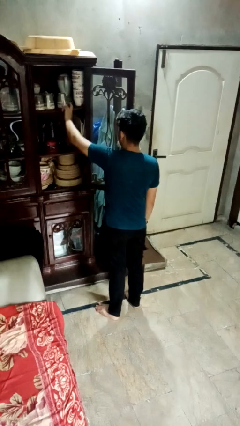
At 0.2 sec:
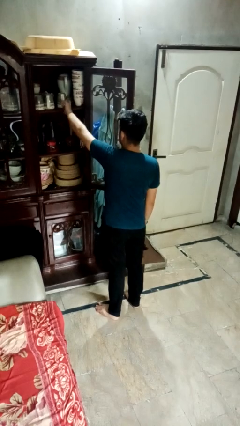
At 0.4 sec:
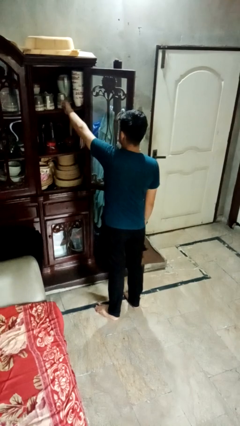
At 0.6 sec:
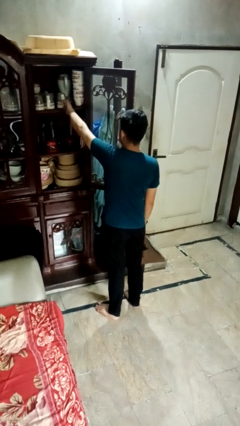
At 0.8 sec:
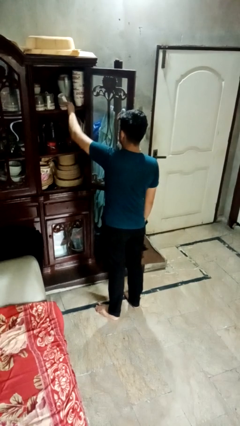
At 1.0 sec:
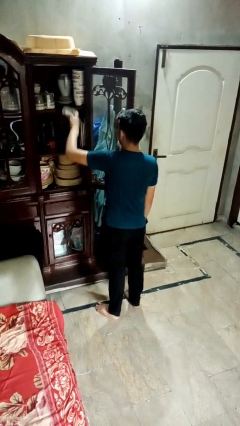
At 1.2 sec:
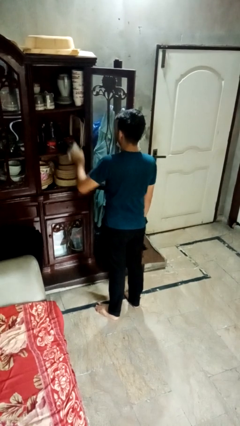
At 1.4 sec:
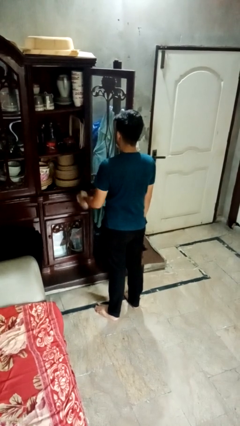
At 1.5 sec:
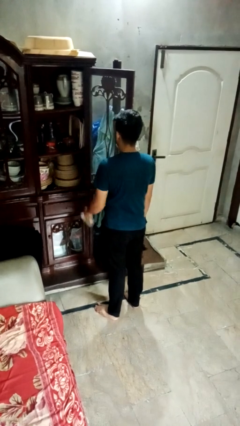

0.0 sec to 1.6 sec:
person takes object from cabinet

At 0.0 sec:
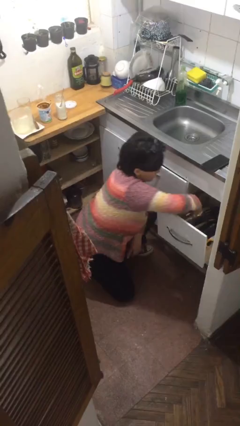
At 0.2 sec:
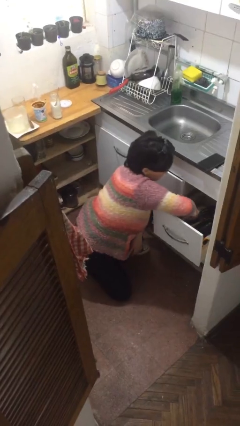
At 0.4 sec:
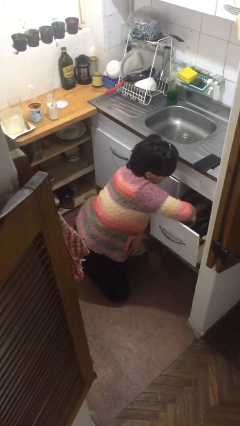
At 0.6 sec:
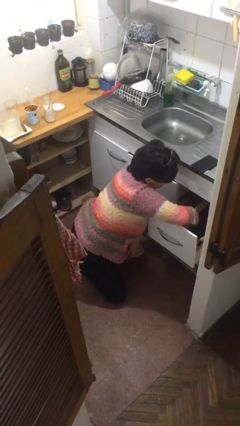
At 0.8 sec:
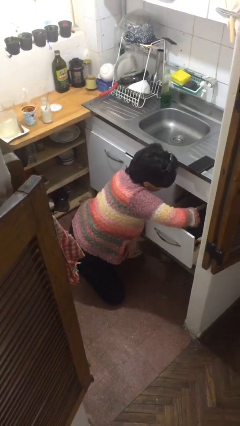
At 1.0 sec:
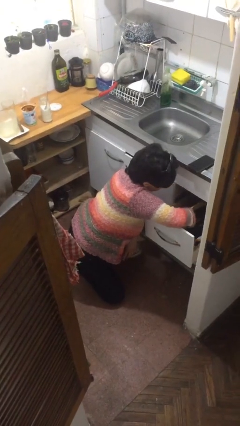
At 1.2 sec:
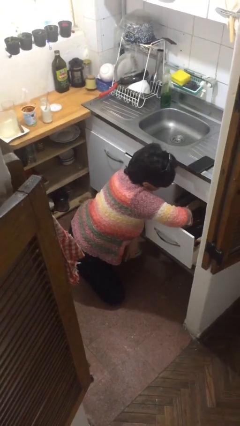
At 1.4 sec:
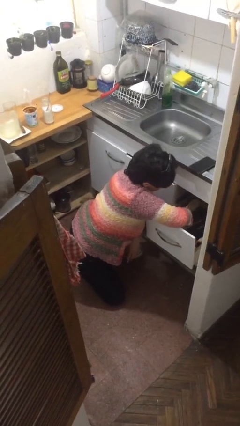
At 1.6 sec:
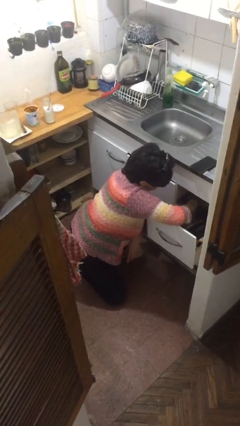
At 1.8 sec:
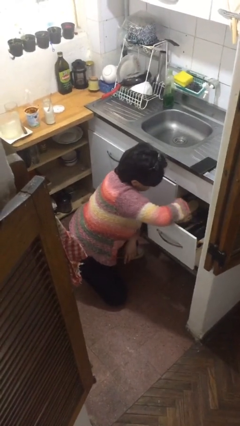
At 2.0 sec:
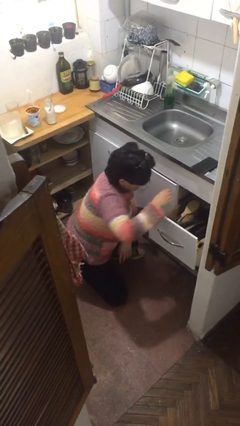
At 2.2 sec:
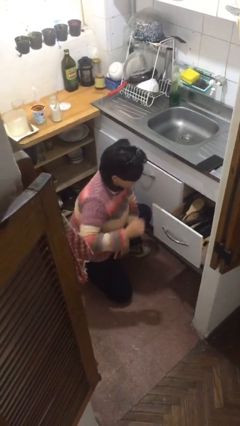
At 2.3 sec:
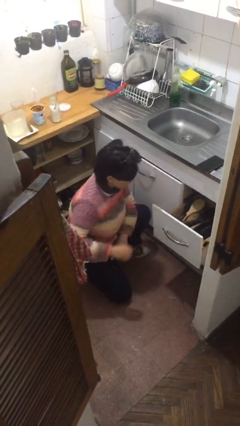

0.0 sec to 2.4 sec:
person searches in kitchen drawer

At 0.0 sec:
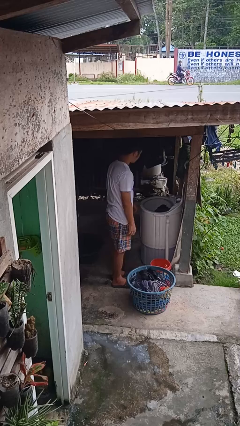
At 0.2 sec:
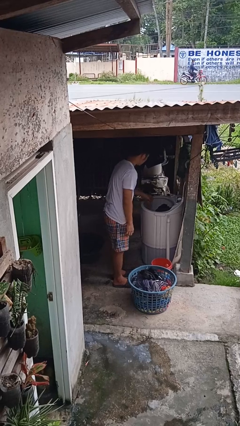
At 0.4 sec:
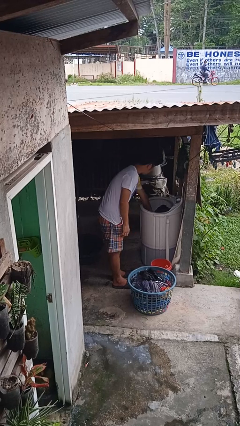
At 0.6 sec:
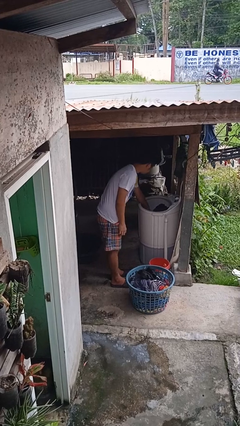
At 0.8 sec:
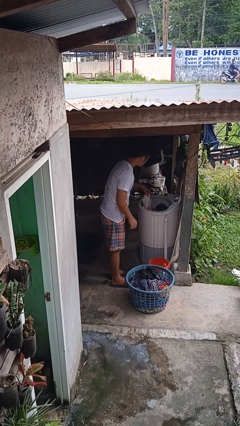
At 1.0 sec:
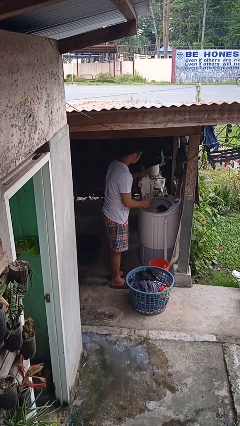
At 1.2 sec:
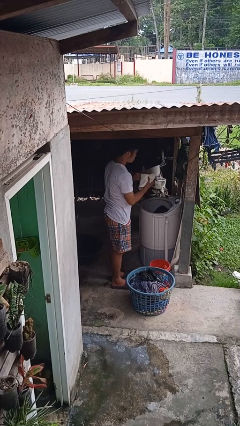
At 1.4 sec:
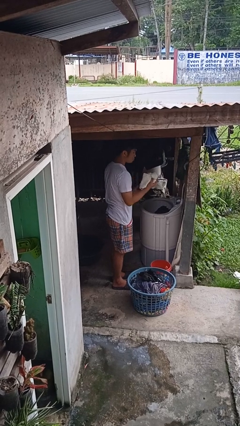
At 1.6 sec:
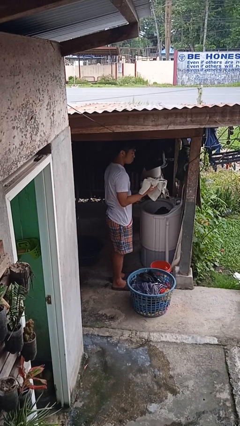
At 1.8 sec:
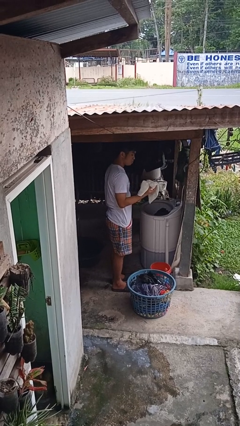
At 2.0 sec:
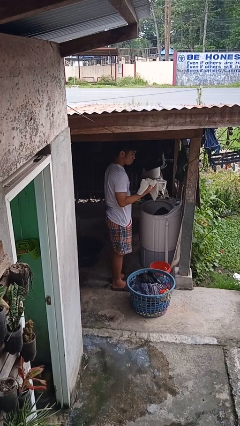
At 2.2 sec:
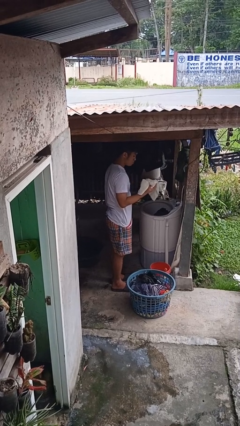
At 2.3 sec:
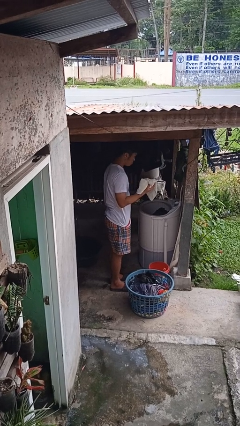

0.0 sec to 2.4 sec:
person unloads clotheswasher

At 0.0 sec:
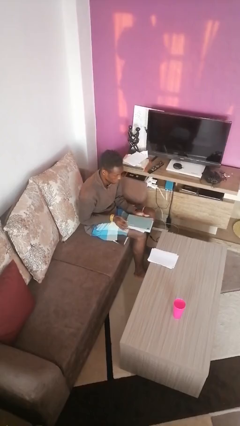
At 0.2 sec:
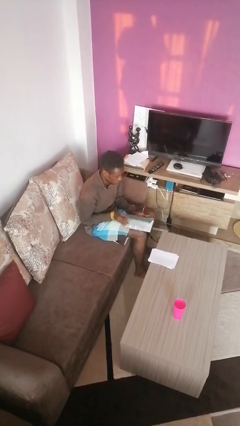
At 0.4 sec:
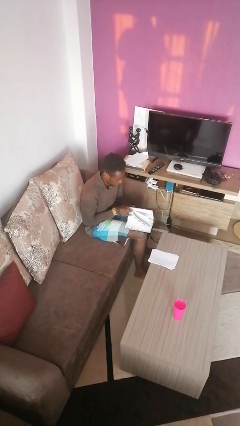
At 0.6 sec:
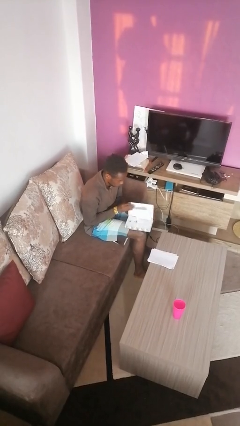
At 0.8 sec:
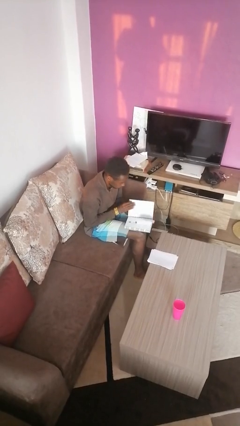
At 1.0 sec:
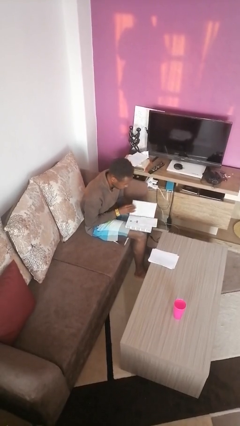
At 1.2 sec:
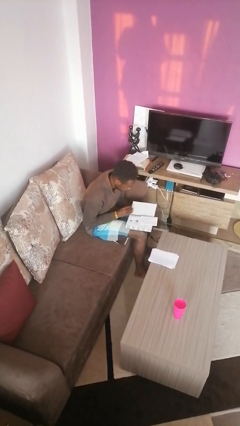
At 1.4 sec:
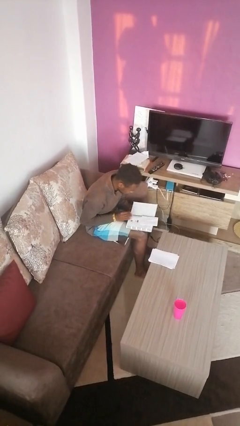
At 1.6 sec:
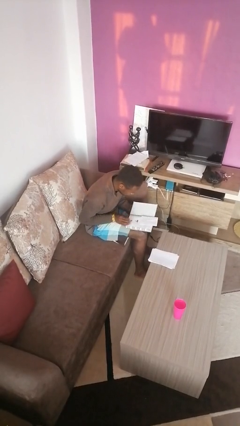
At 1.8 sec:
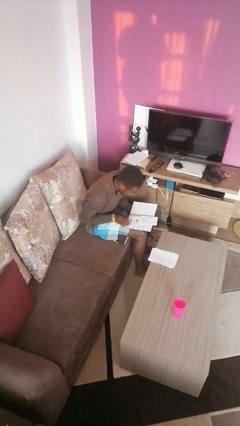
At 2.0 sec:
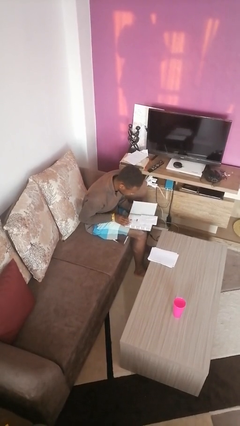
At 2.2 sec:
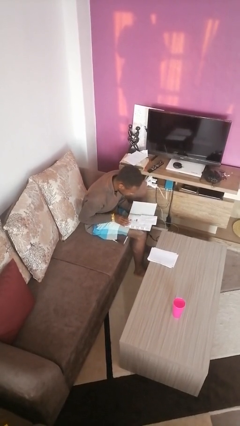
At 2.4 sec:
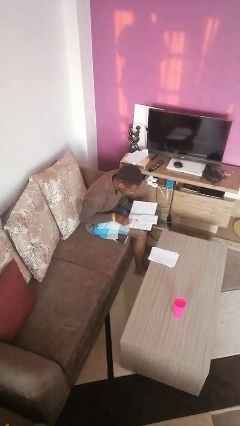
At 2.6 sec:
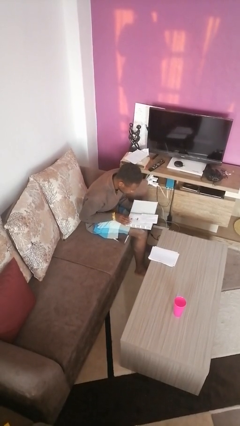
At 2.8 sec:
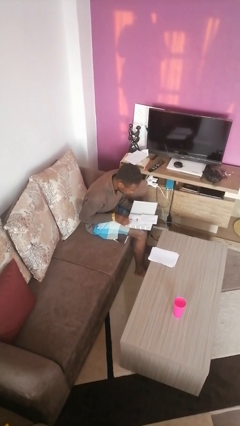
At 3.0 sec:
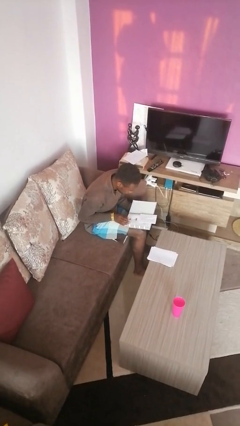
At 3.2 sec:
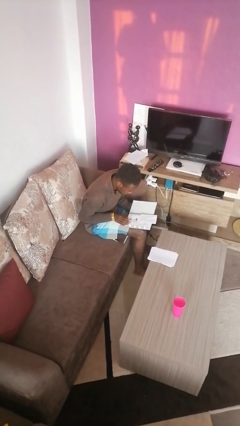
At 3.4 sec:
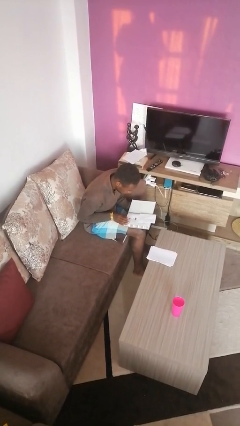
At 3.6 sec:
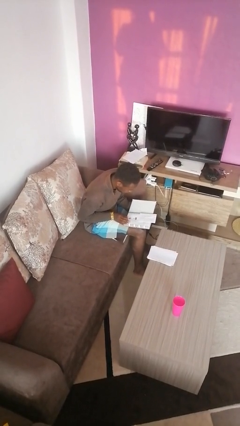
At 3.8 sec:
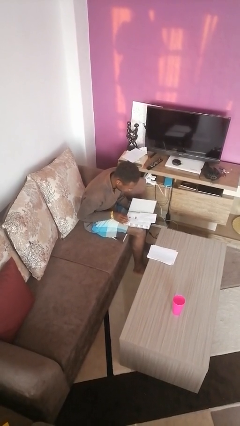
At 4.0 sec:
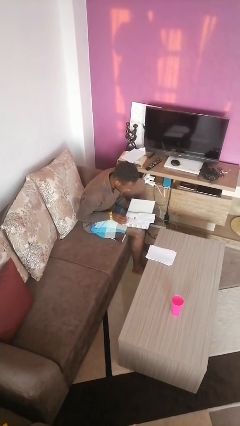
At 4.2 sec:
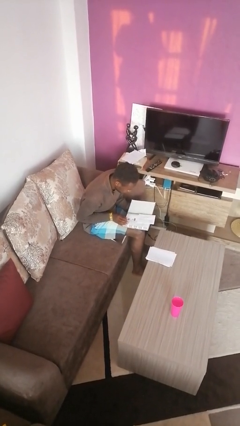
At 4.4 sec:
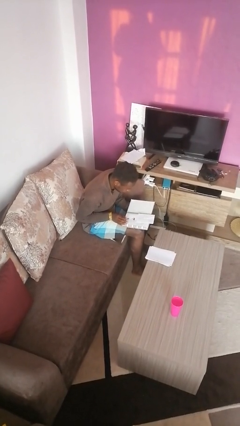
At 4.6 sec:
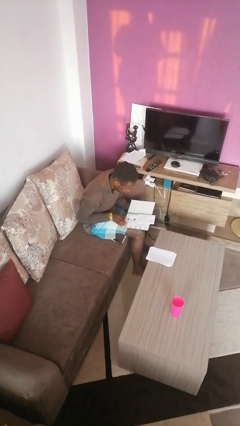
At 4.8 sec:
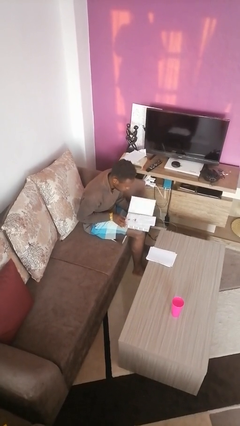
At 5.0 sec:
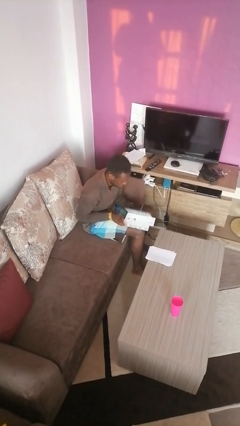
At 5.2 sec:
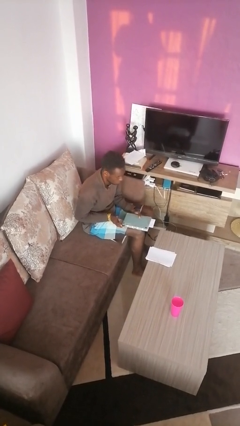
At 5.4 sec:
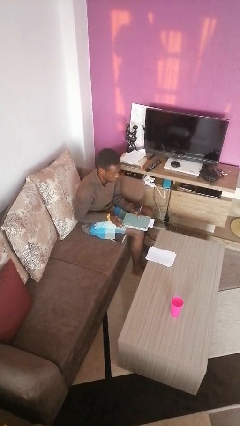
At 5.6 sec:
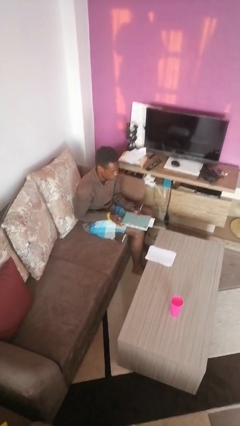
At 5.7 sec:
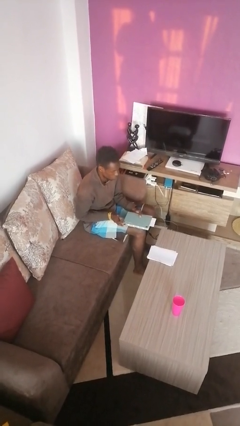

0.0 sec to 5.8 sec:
person reads book

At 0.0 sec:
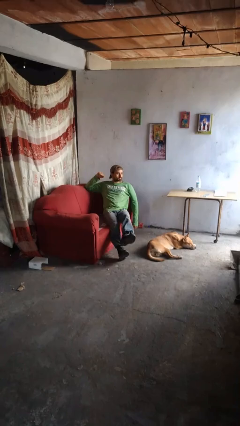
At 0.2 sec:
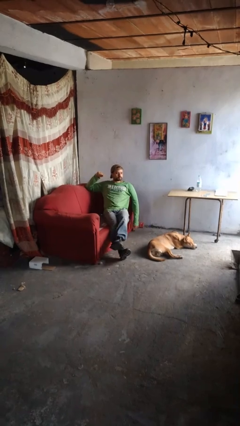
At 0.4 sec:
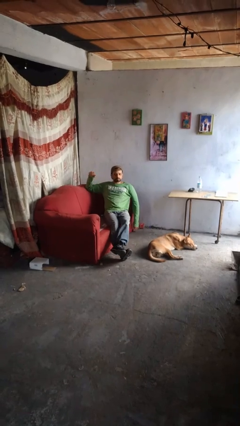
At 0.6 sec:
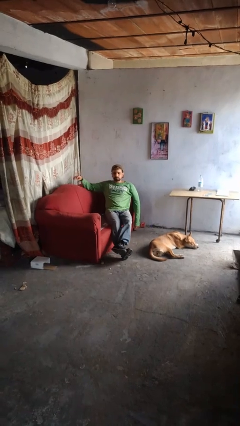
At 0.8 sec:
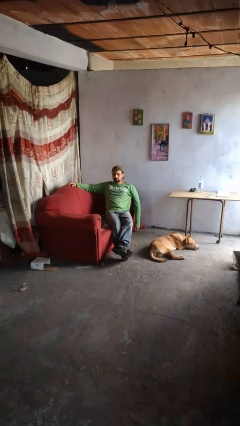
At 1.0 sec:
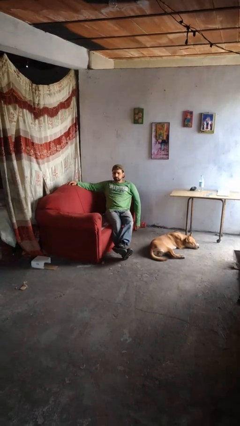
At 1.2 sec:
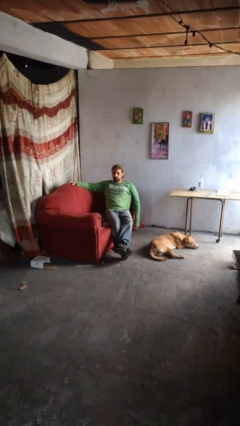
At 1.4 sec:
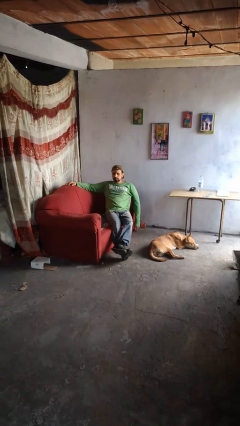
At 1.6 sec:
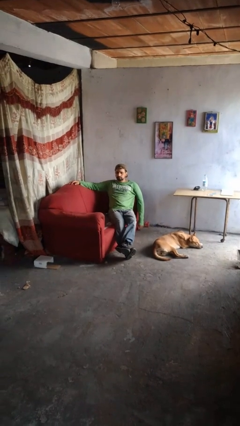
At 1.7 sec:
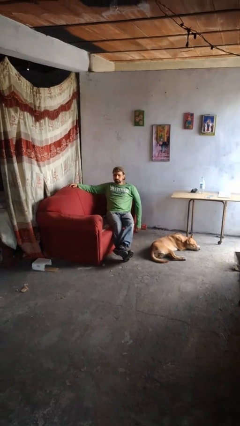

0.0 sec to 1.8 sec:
person crosses legs

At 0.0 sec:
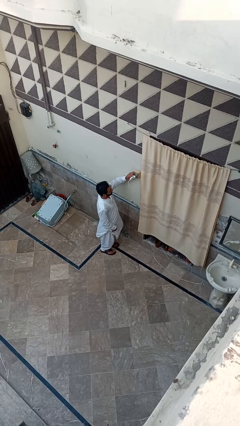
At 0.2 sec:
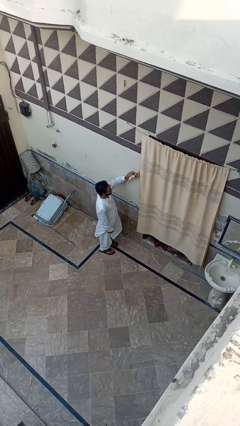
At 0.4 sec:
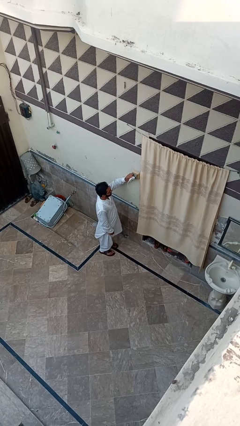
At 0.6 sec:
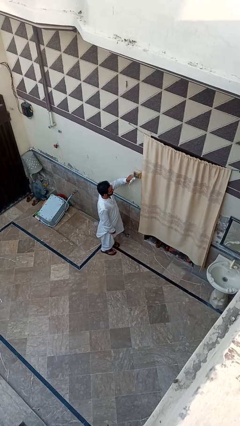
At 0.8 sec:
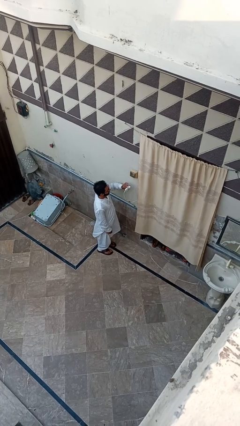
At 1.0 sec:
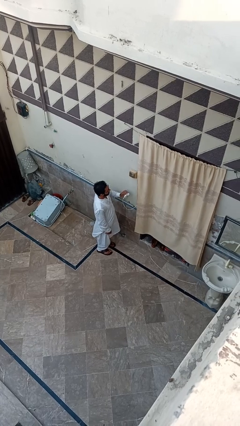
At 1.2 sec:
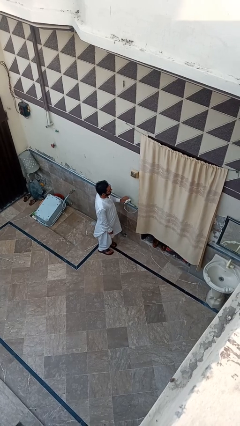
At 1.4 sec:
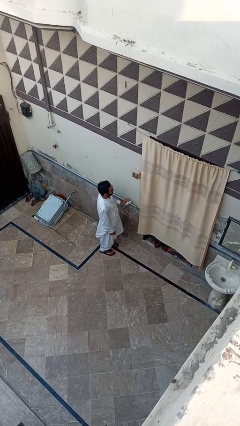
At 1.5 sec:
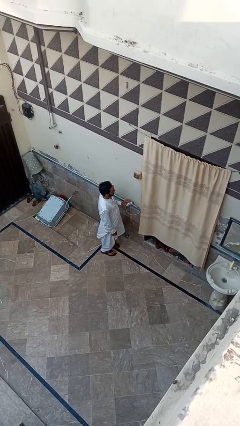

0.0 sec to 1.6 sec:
person unplugs from electrical socket

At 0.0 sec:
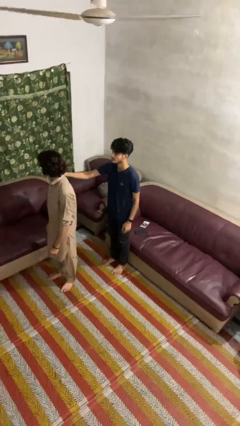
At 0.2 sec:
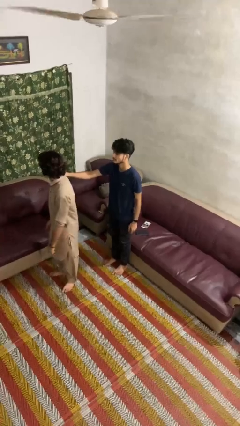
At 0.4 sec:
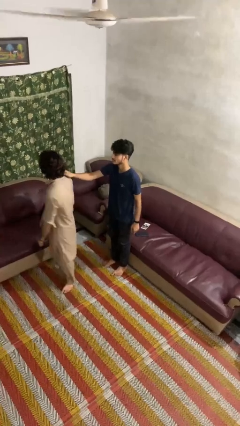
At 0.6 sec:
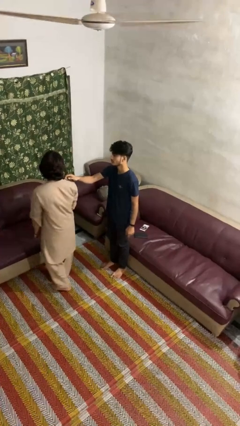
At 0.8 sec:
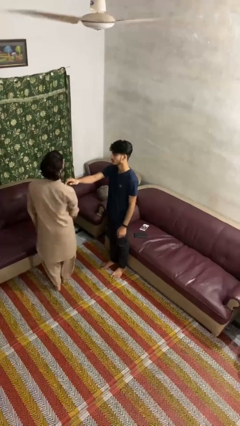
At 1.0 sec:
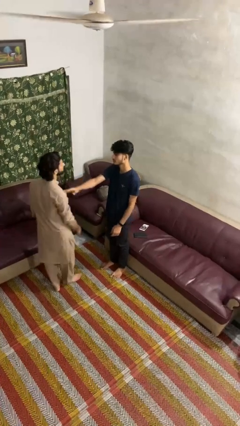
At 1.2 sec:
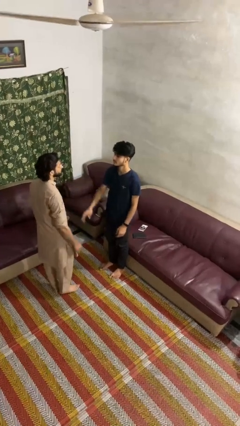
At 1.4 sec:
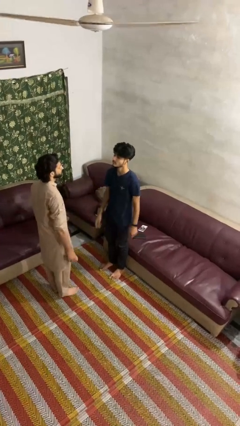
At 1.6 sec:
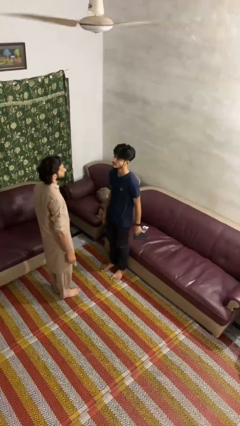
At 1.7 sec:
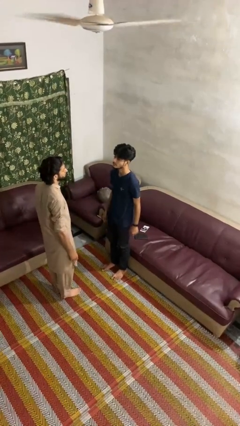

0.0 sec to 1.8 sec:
person spins person around
